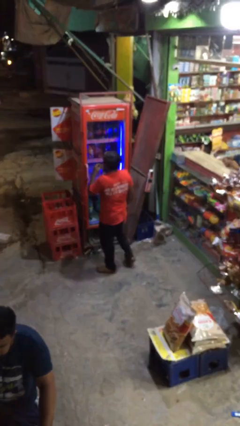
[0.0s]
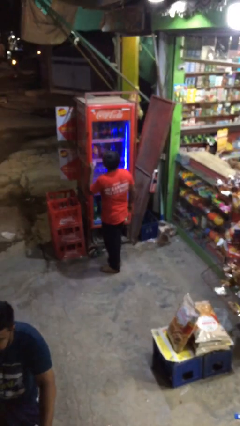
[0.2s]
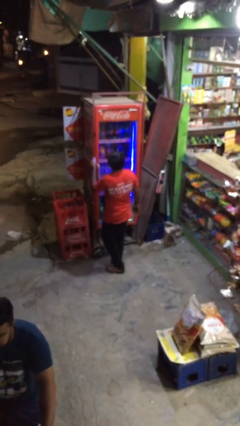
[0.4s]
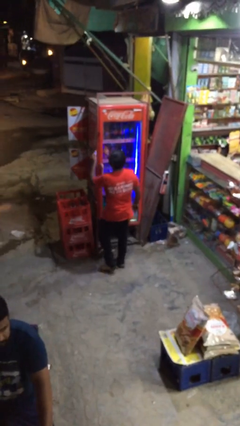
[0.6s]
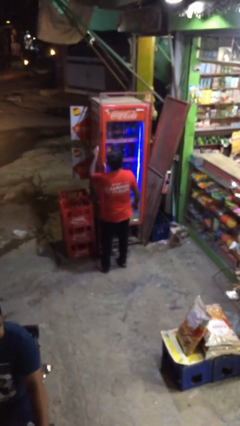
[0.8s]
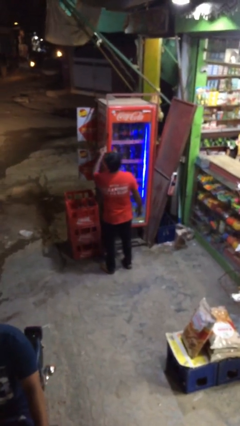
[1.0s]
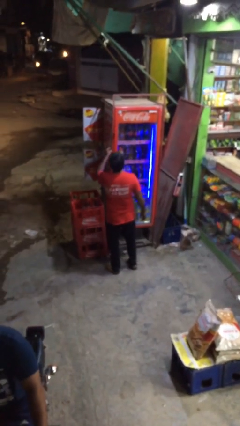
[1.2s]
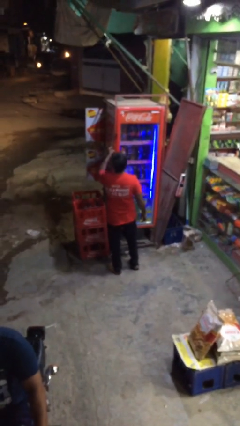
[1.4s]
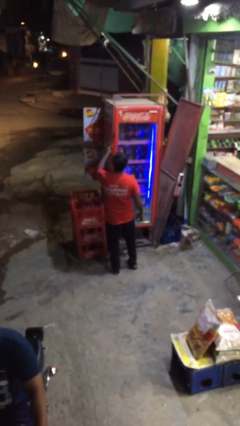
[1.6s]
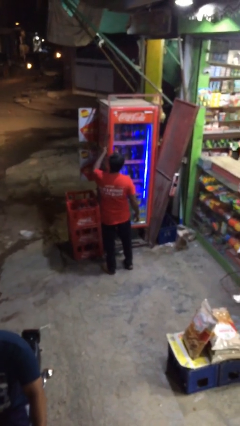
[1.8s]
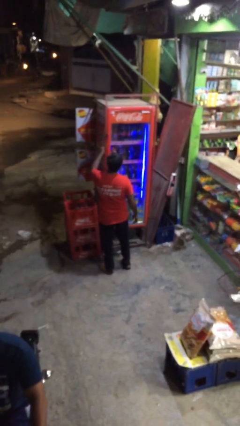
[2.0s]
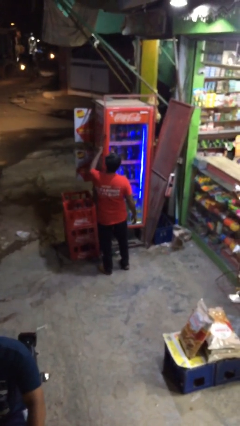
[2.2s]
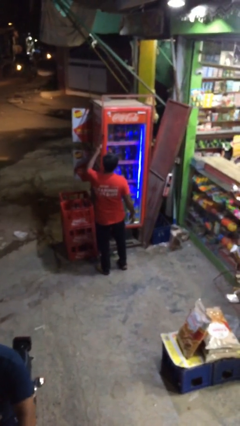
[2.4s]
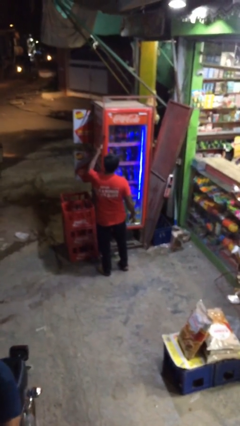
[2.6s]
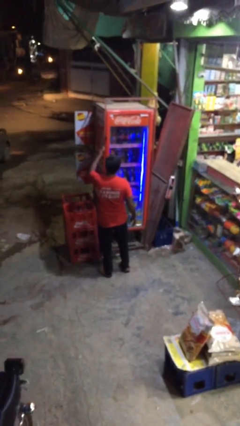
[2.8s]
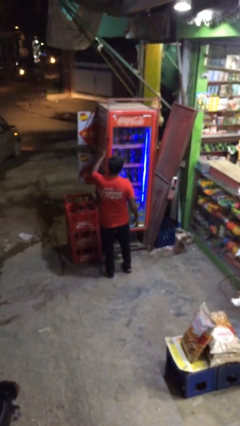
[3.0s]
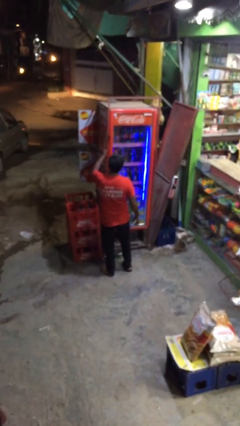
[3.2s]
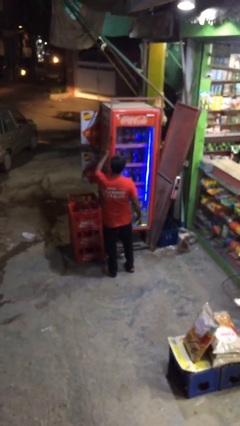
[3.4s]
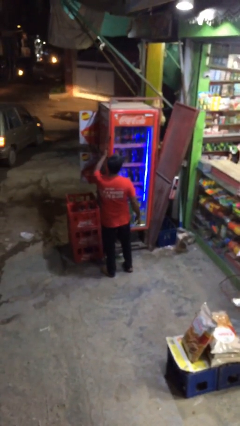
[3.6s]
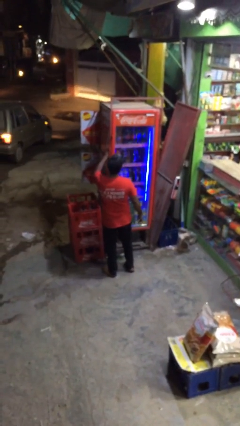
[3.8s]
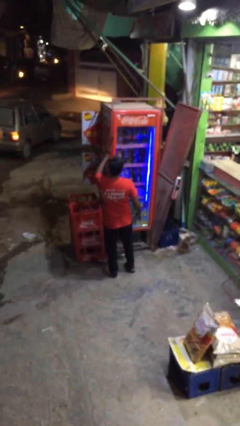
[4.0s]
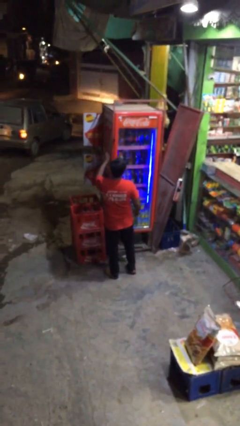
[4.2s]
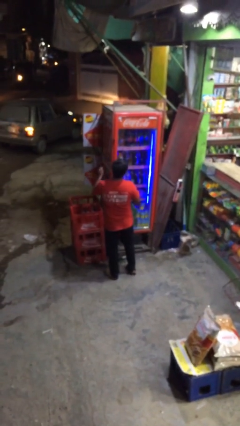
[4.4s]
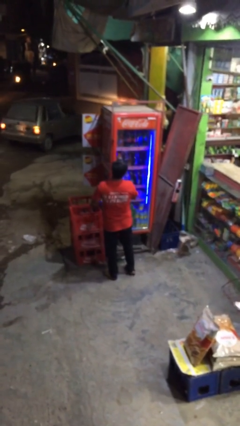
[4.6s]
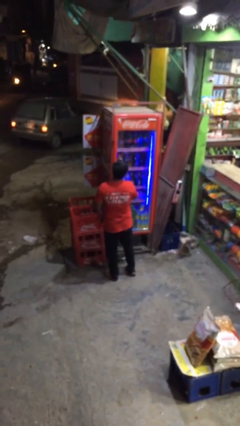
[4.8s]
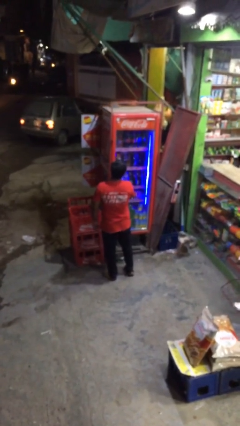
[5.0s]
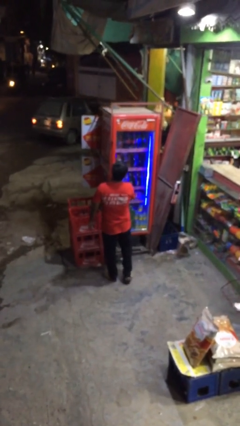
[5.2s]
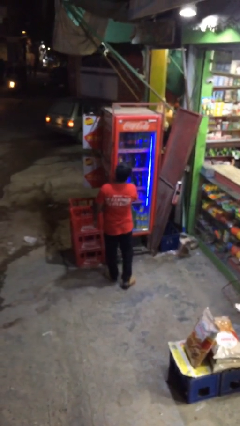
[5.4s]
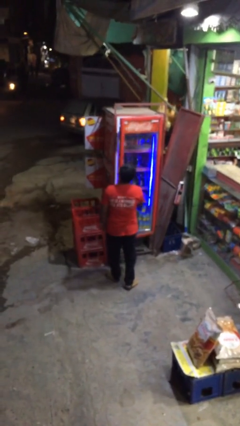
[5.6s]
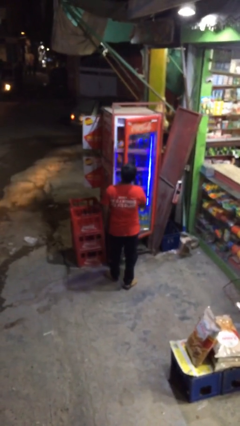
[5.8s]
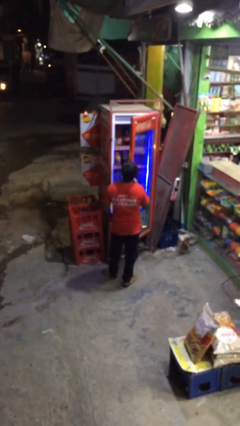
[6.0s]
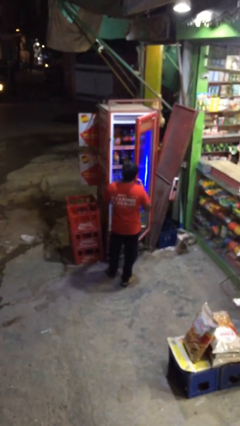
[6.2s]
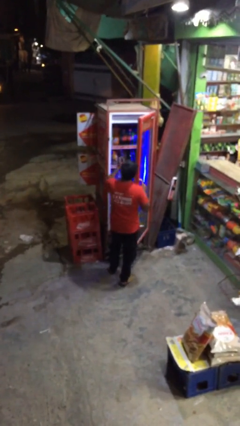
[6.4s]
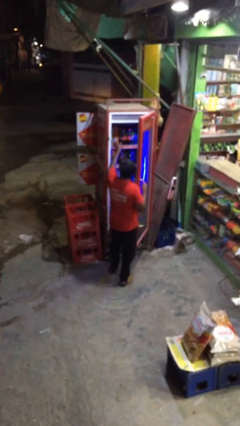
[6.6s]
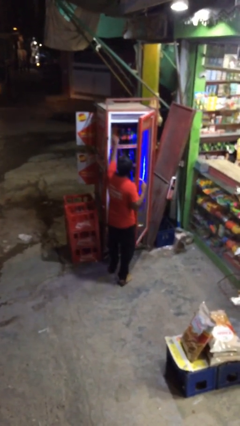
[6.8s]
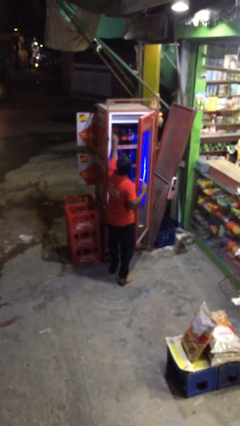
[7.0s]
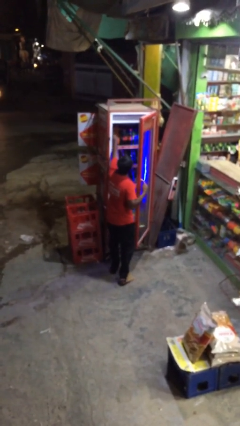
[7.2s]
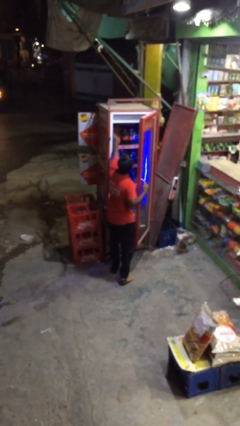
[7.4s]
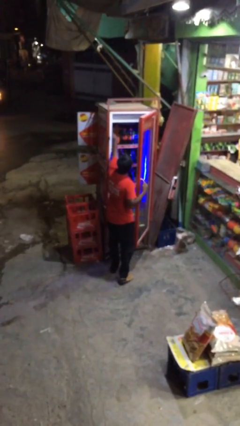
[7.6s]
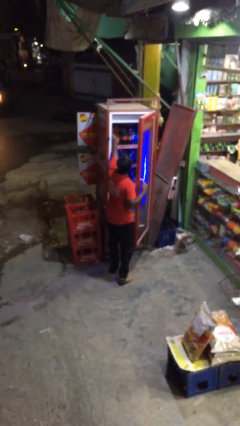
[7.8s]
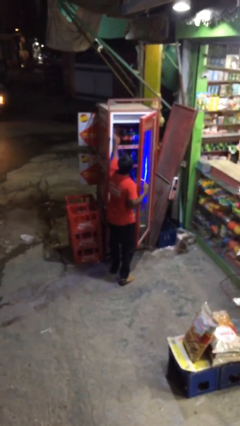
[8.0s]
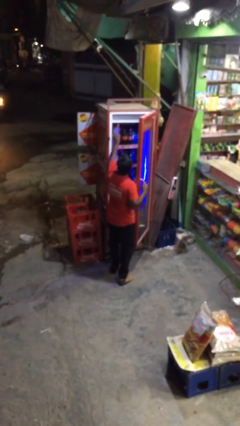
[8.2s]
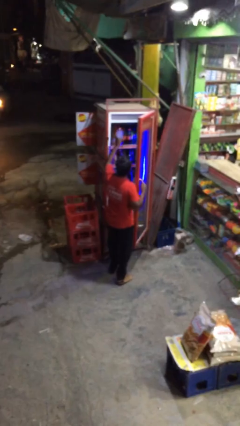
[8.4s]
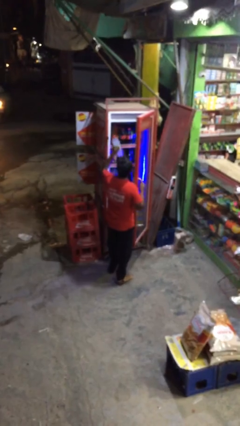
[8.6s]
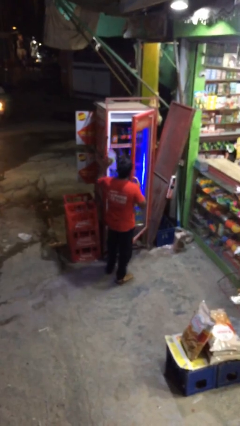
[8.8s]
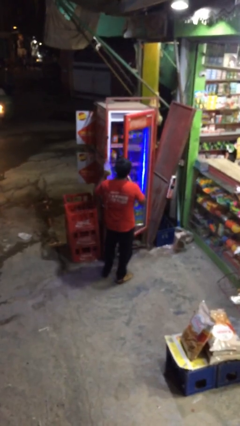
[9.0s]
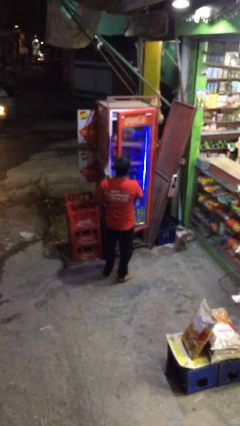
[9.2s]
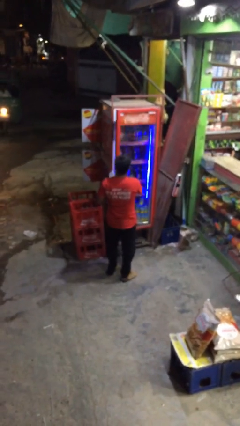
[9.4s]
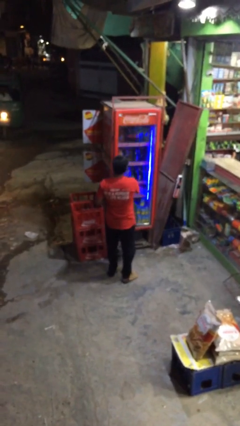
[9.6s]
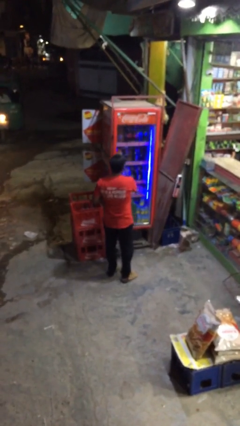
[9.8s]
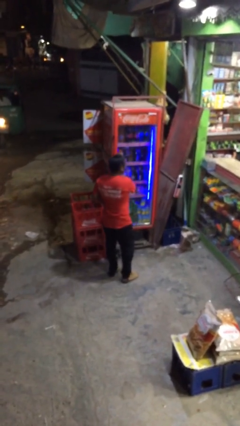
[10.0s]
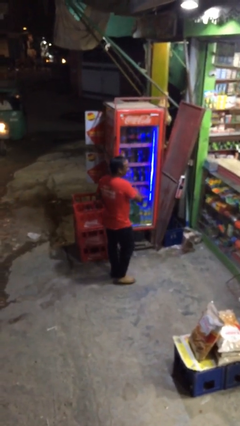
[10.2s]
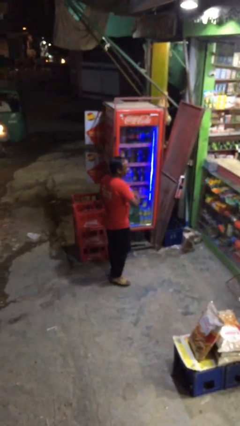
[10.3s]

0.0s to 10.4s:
person purchases from machine

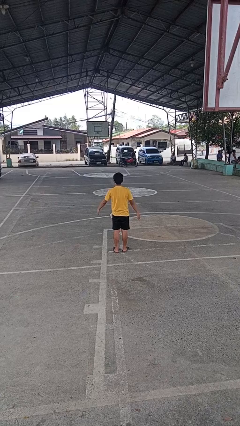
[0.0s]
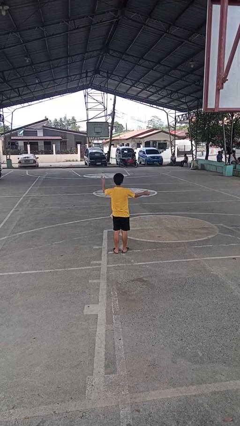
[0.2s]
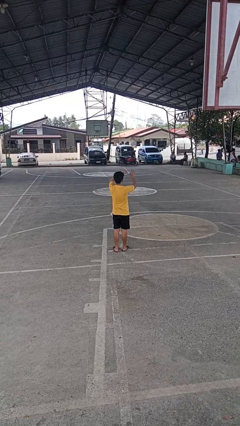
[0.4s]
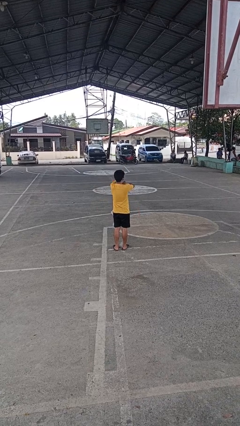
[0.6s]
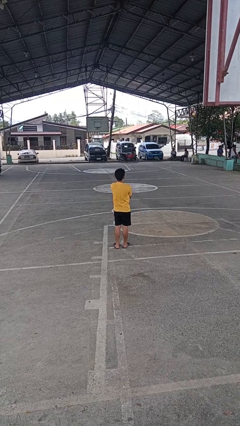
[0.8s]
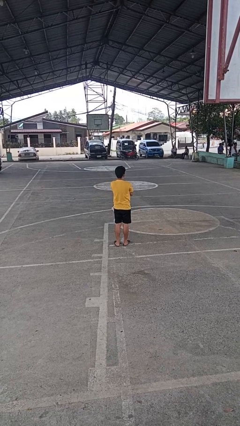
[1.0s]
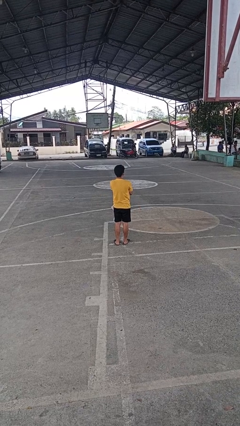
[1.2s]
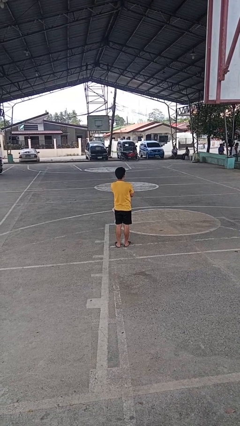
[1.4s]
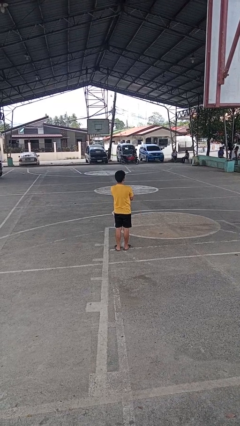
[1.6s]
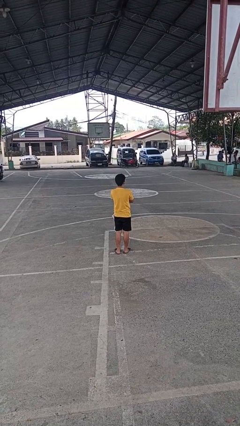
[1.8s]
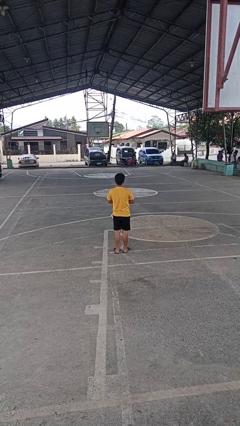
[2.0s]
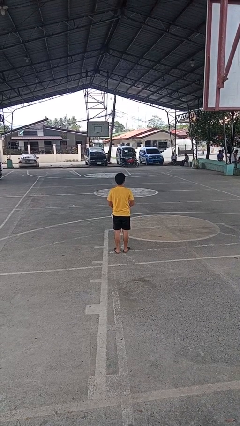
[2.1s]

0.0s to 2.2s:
person crosses arms

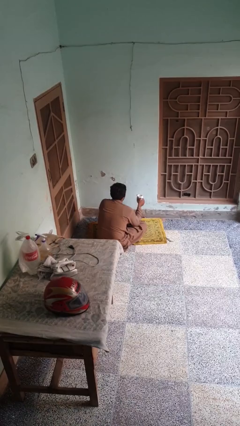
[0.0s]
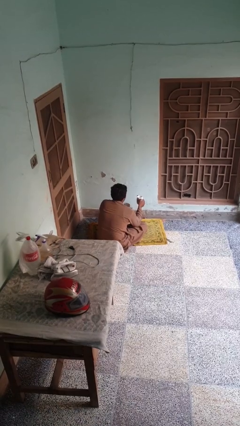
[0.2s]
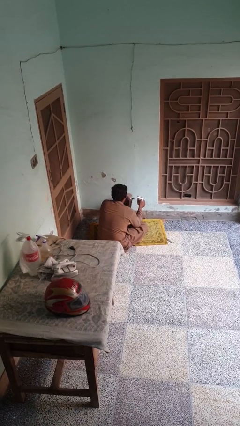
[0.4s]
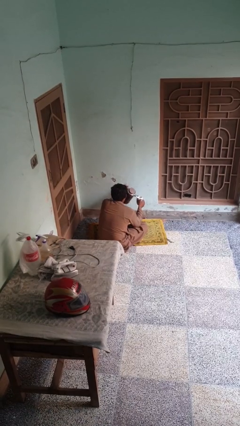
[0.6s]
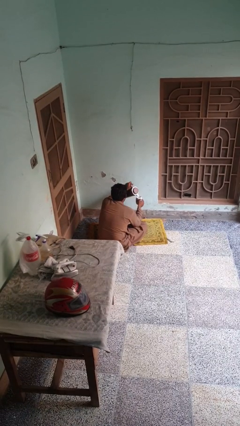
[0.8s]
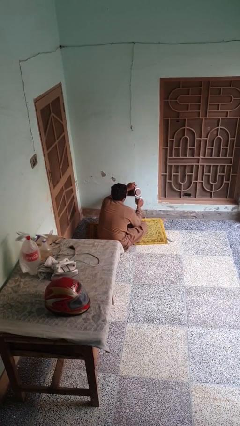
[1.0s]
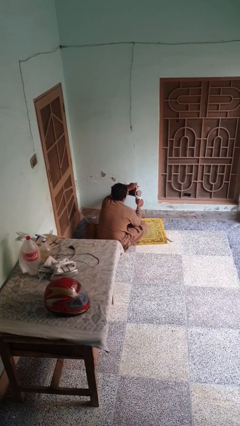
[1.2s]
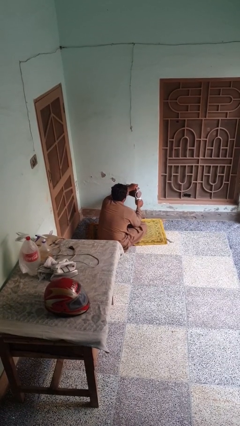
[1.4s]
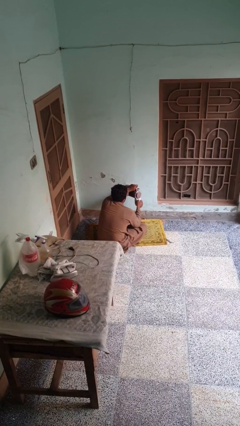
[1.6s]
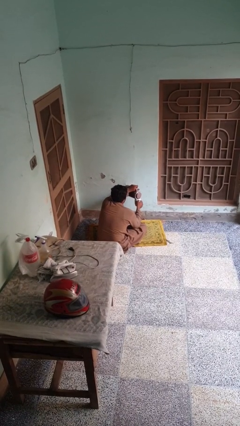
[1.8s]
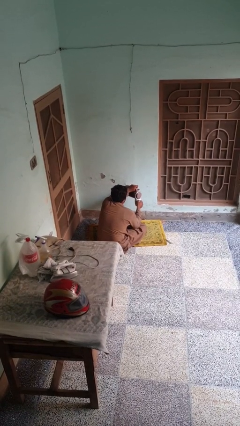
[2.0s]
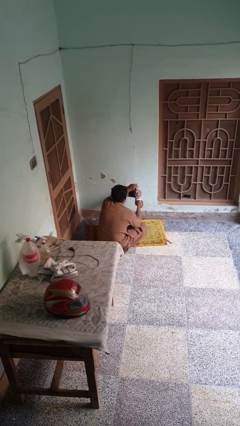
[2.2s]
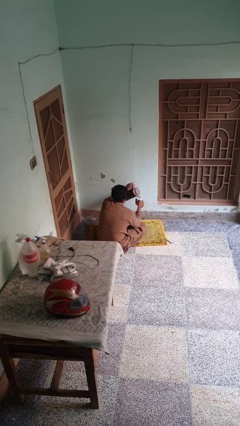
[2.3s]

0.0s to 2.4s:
person pours coffee into mug

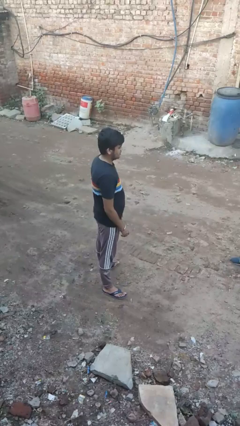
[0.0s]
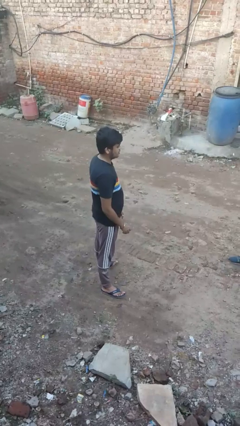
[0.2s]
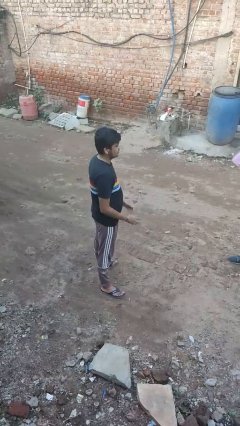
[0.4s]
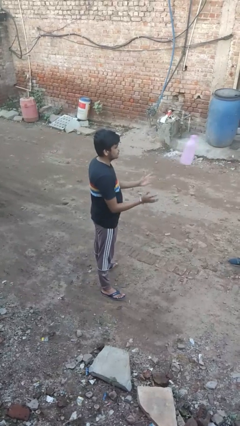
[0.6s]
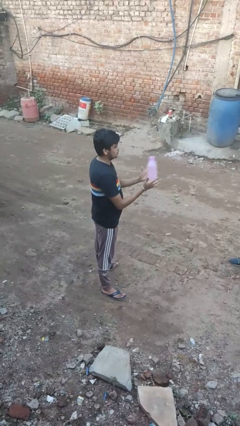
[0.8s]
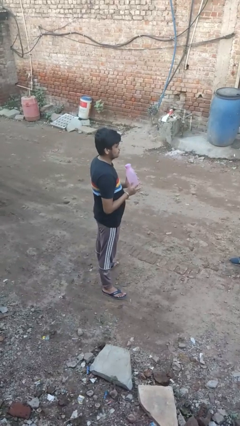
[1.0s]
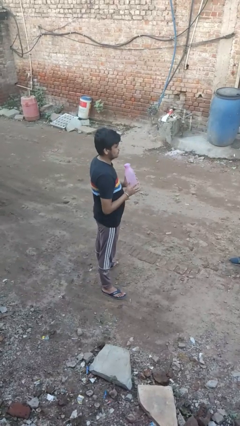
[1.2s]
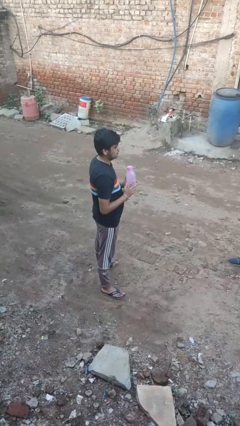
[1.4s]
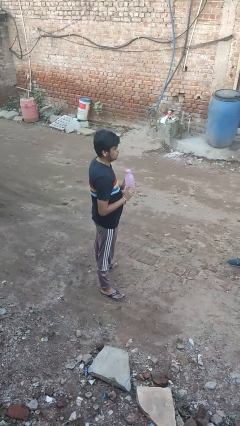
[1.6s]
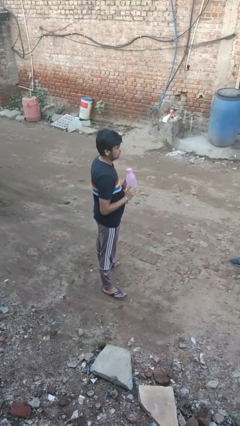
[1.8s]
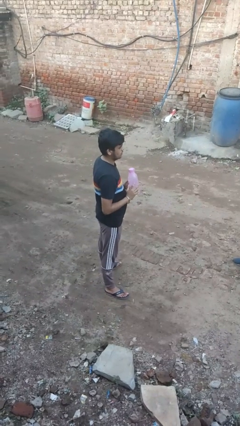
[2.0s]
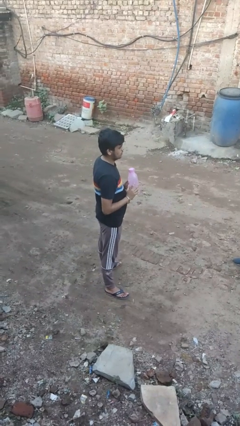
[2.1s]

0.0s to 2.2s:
person catches object from person

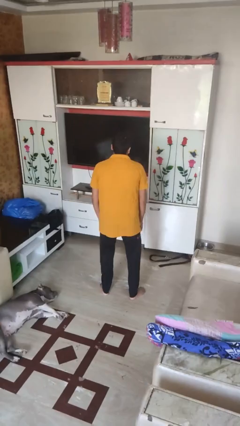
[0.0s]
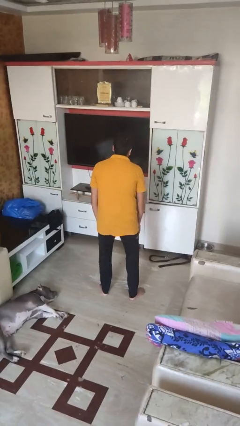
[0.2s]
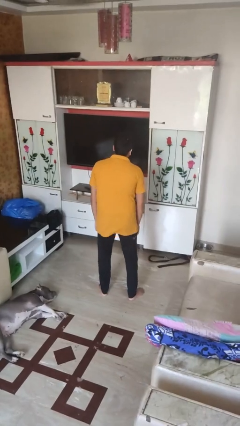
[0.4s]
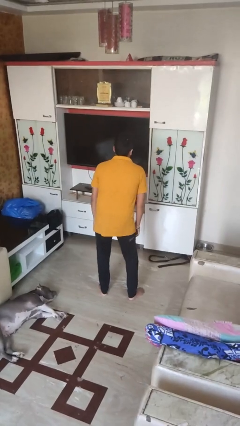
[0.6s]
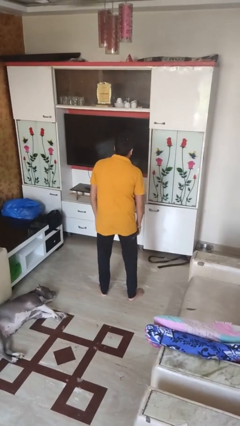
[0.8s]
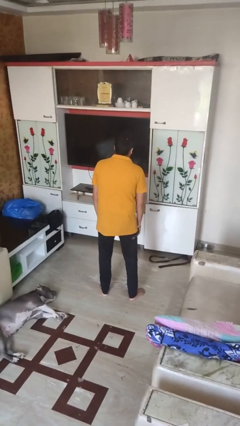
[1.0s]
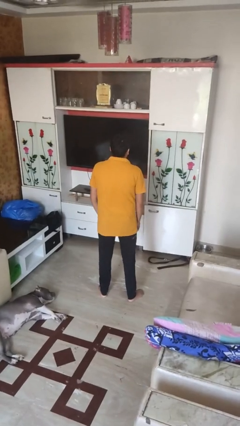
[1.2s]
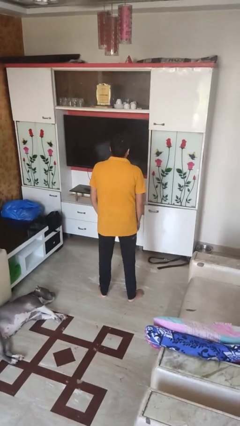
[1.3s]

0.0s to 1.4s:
person wiggles hips
